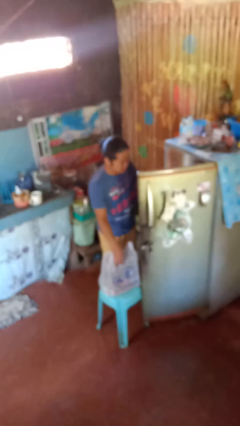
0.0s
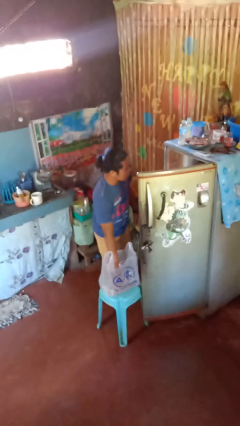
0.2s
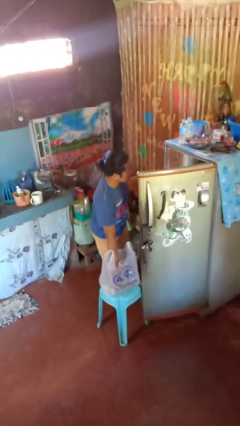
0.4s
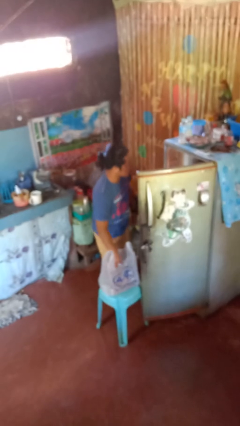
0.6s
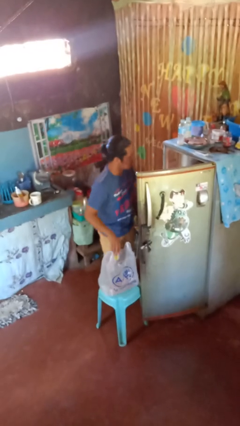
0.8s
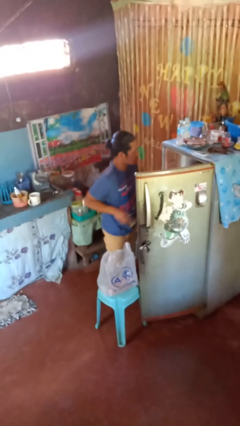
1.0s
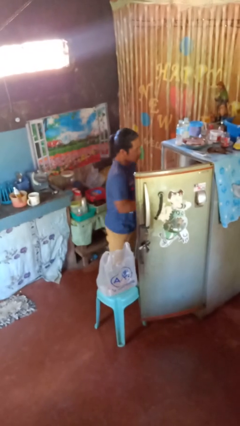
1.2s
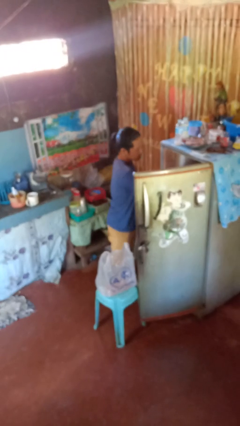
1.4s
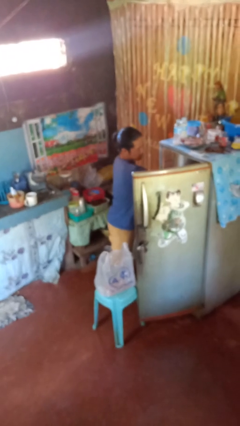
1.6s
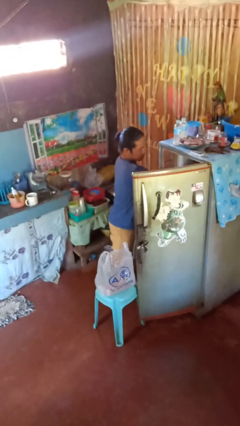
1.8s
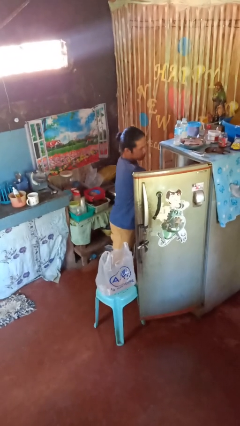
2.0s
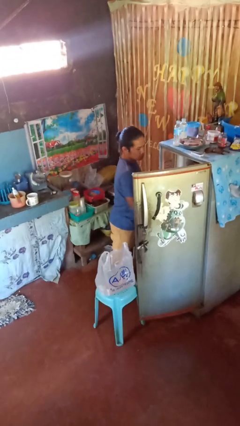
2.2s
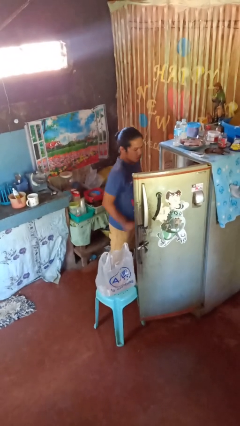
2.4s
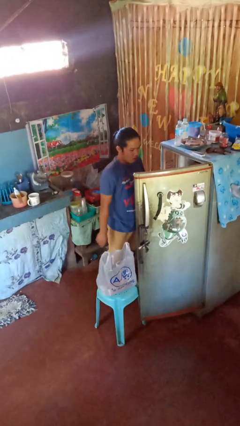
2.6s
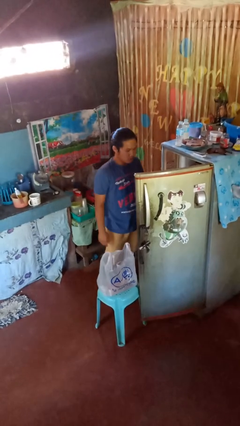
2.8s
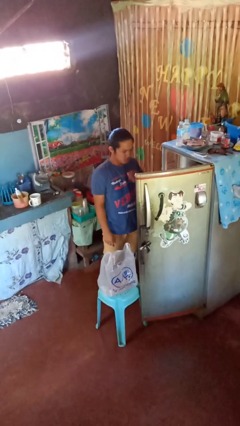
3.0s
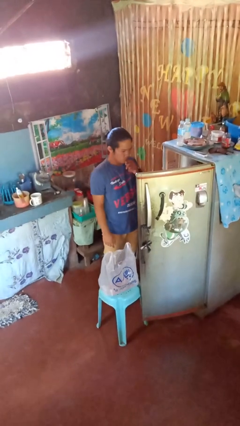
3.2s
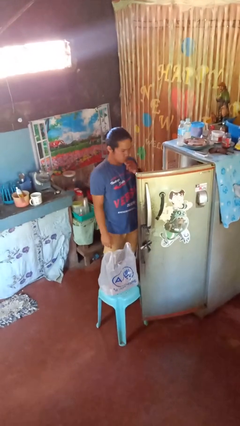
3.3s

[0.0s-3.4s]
person loads groceries into refrigerator

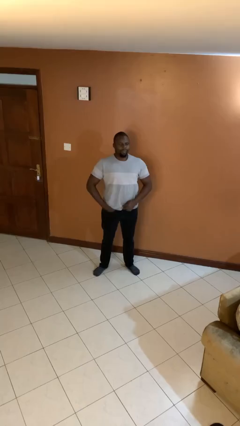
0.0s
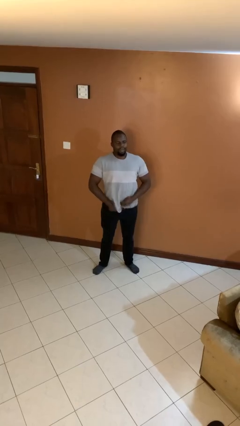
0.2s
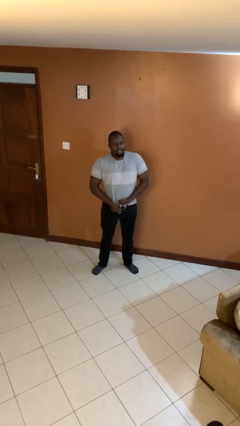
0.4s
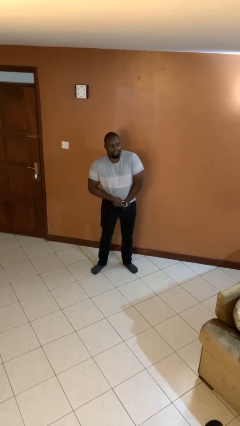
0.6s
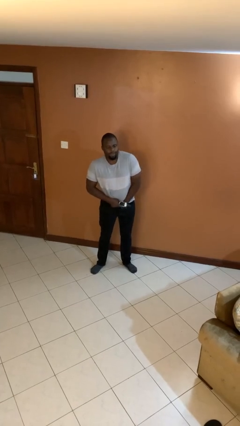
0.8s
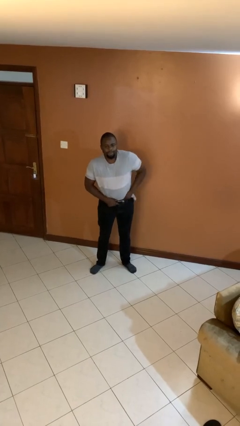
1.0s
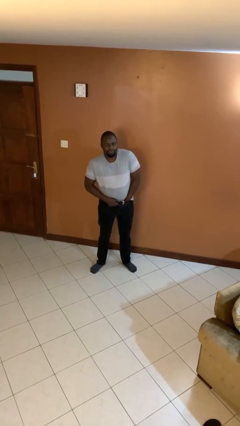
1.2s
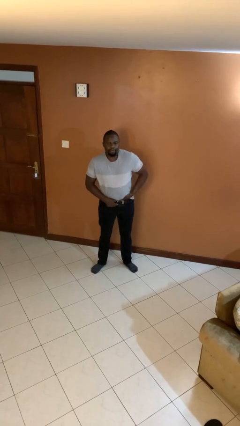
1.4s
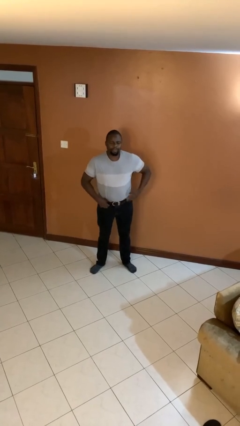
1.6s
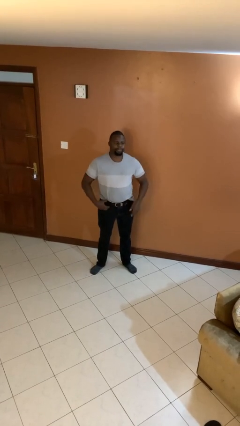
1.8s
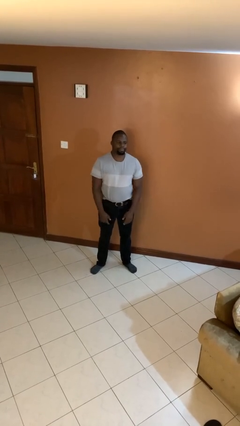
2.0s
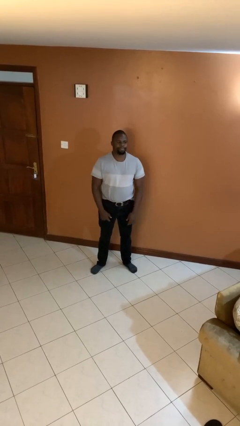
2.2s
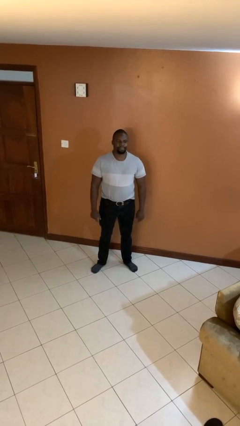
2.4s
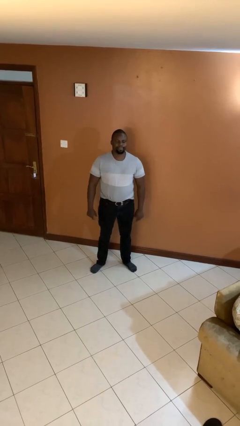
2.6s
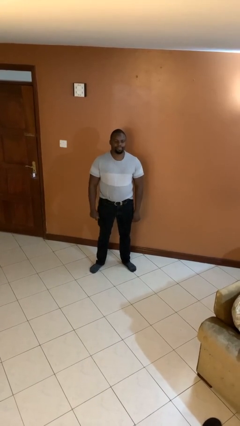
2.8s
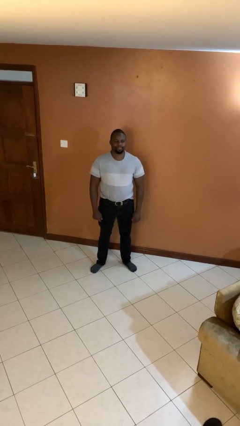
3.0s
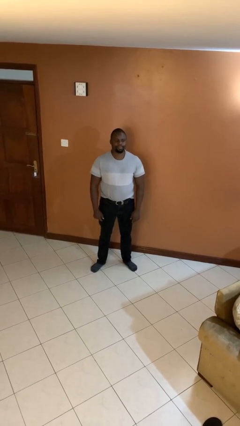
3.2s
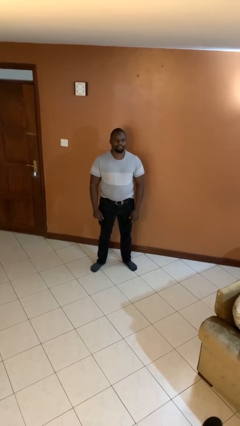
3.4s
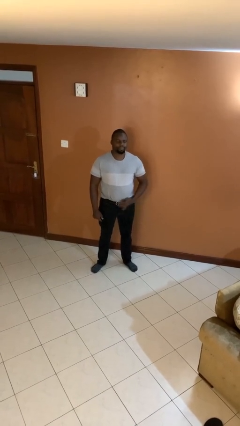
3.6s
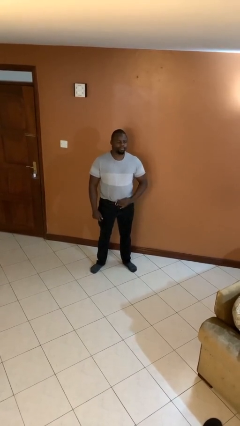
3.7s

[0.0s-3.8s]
person tucks in shirt

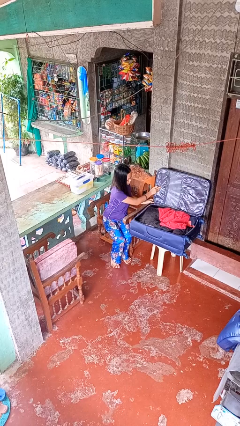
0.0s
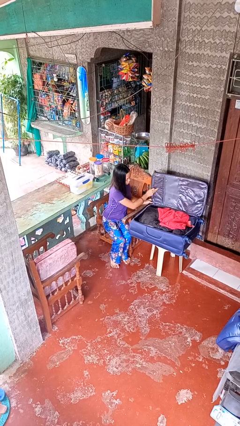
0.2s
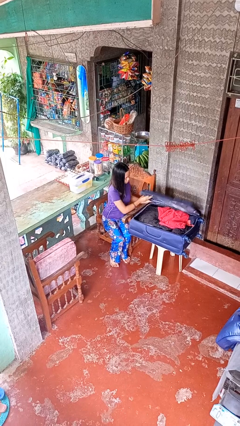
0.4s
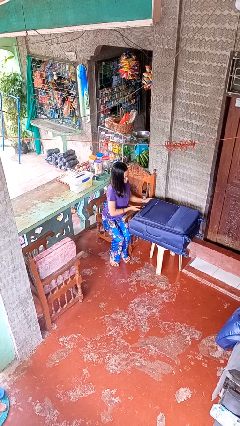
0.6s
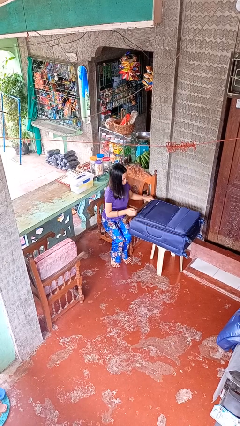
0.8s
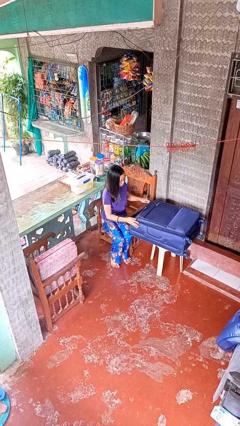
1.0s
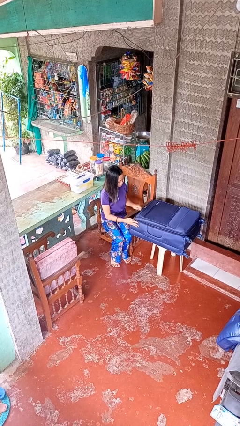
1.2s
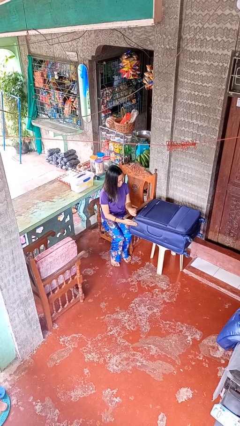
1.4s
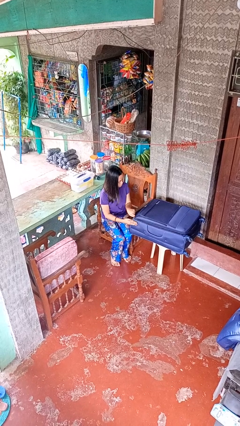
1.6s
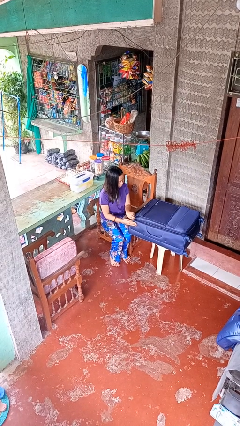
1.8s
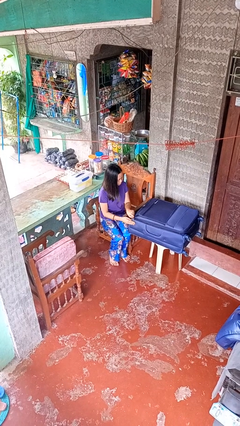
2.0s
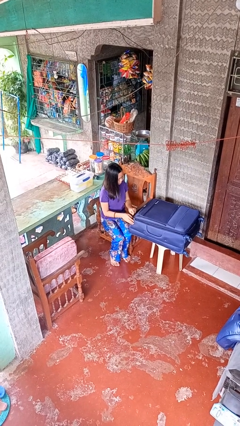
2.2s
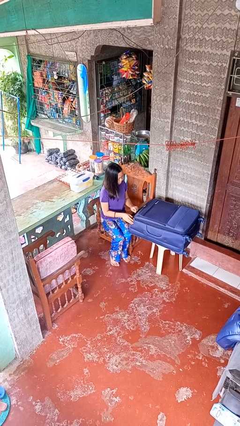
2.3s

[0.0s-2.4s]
person closes suitcase

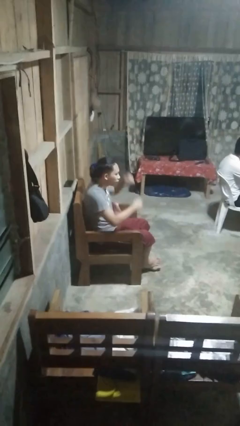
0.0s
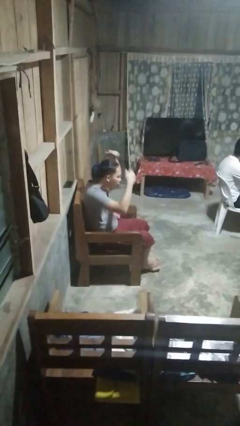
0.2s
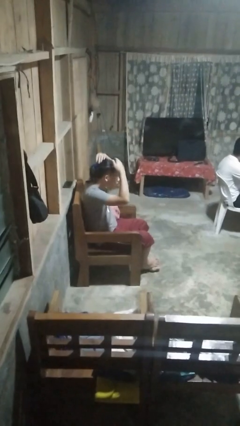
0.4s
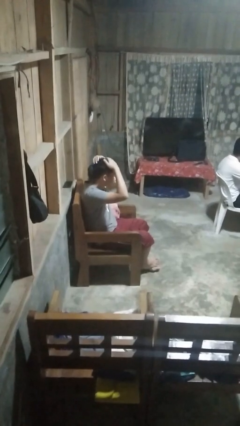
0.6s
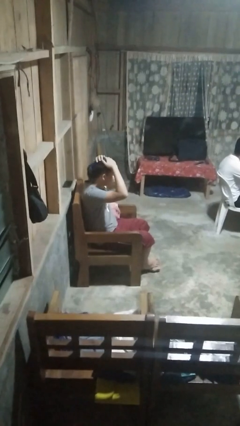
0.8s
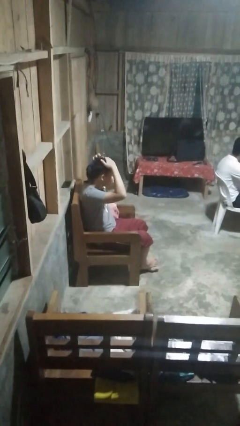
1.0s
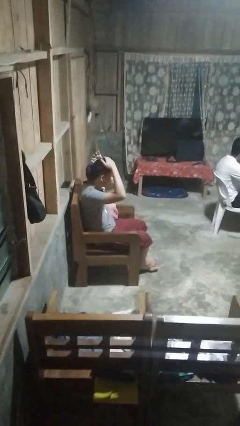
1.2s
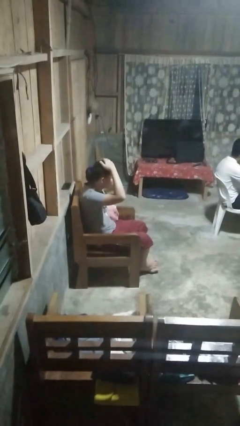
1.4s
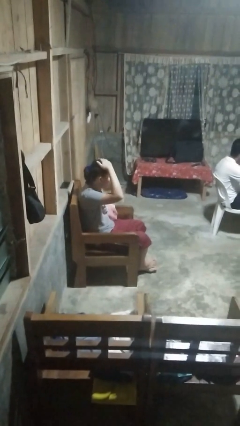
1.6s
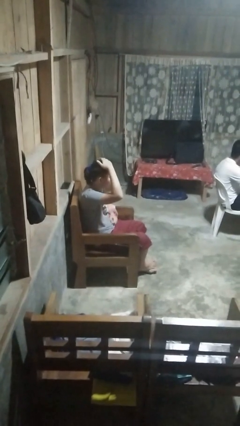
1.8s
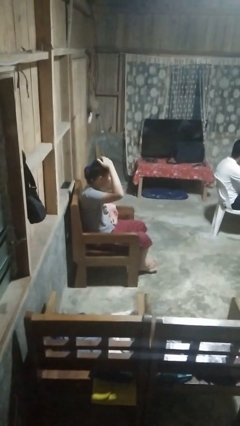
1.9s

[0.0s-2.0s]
person pats head

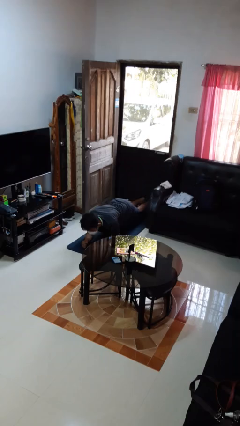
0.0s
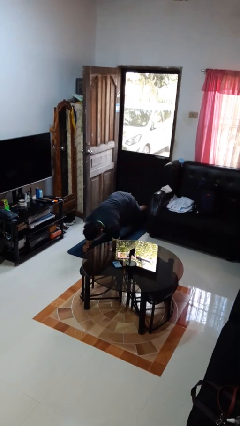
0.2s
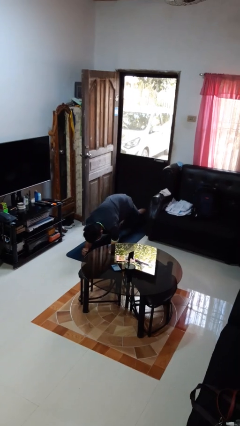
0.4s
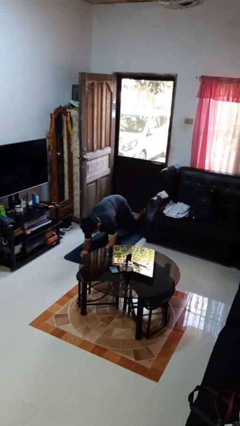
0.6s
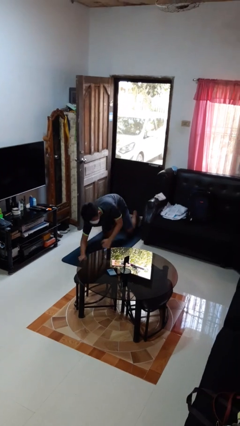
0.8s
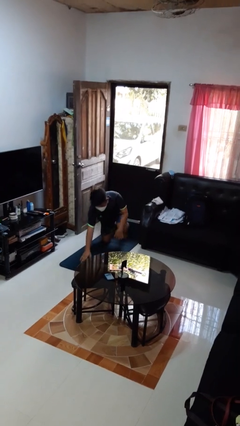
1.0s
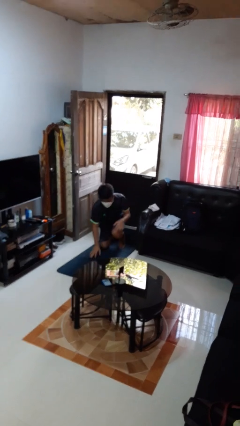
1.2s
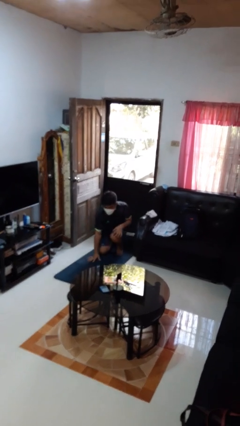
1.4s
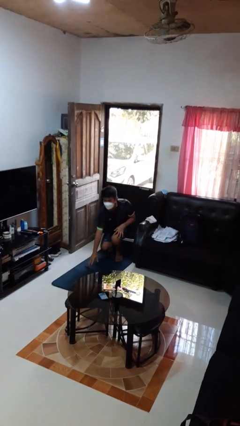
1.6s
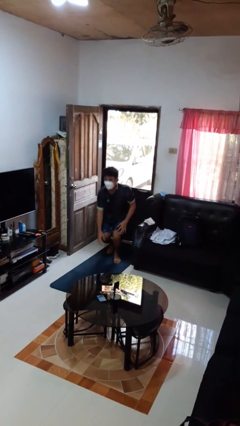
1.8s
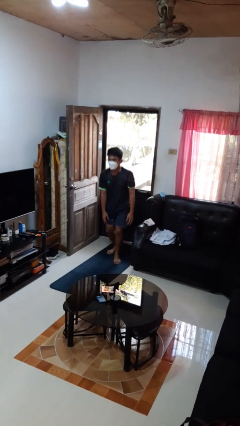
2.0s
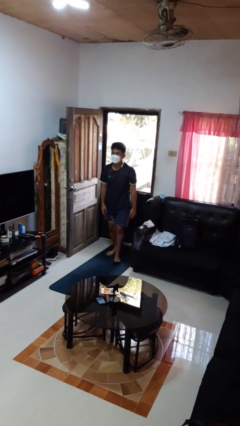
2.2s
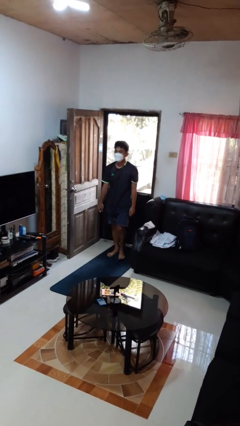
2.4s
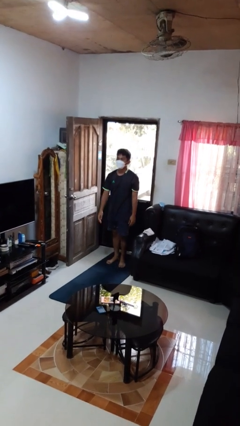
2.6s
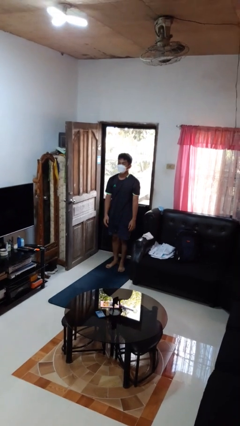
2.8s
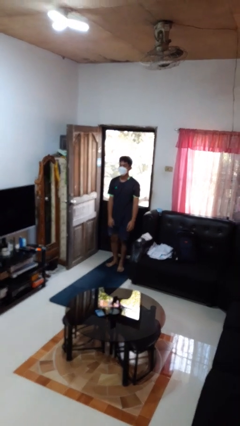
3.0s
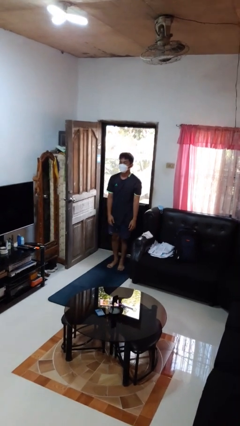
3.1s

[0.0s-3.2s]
person stands up from floor

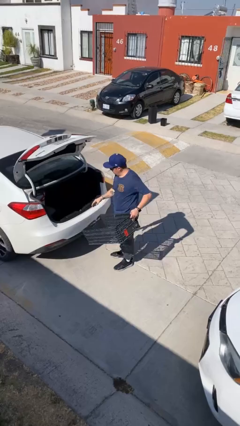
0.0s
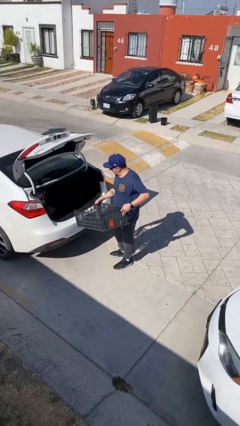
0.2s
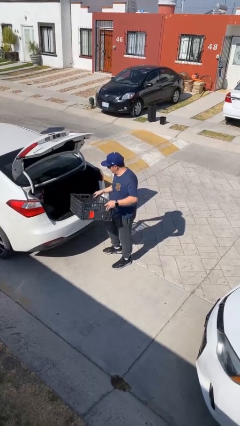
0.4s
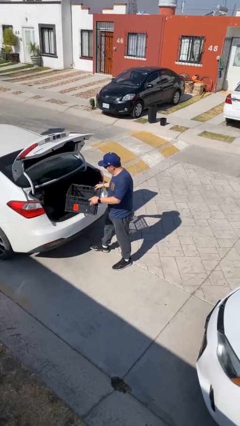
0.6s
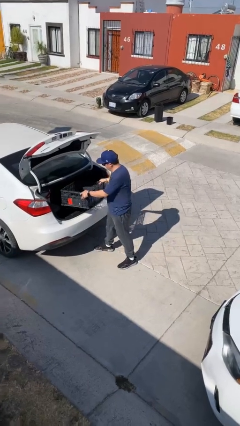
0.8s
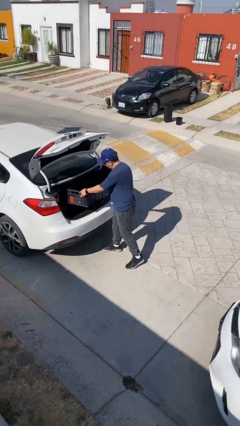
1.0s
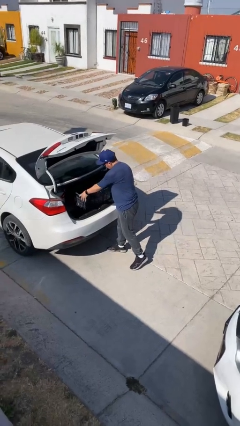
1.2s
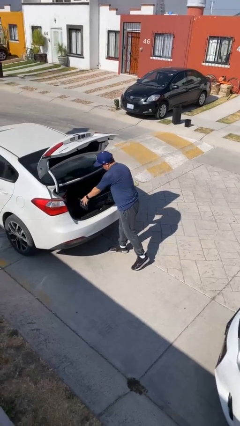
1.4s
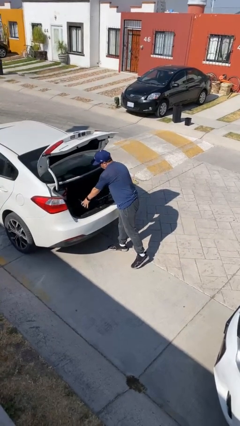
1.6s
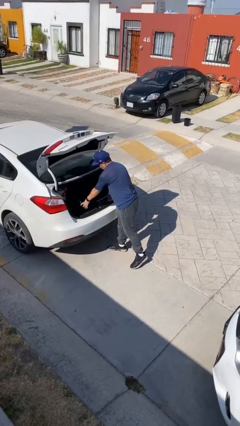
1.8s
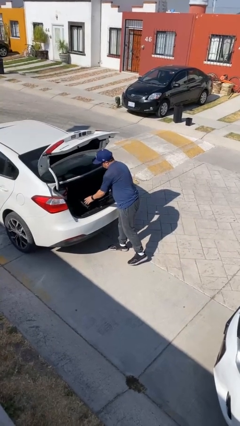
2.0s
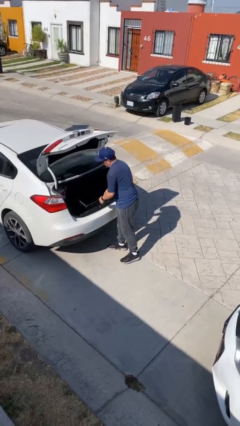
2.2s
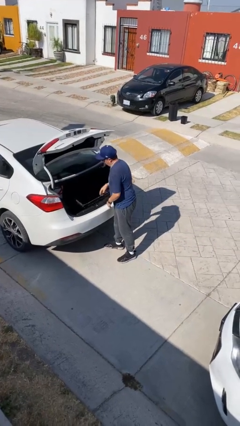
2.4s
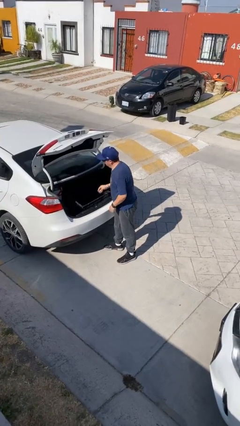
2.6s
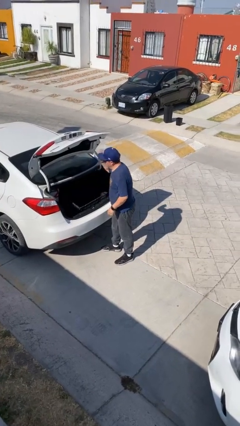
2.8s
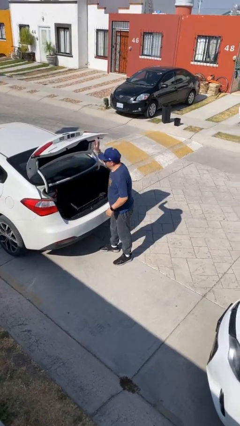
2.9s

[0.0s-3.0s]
person loads car
